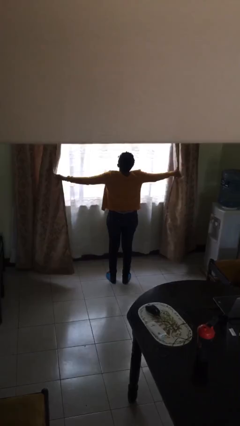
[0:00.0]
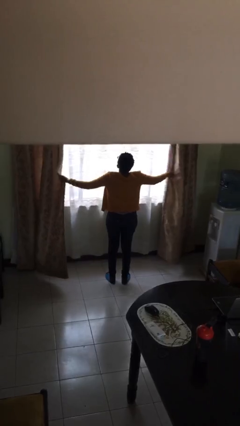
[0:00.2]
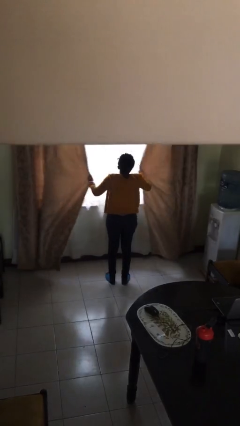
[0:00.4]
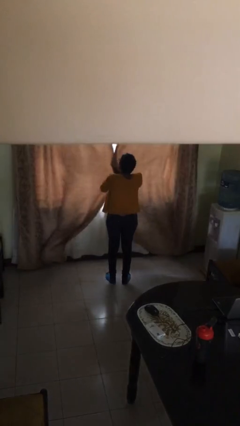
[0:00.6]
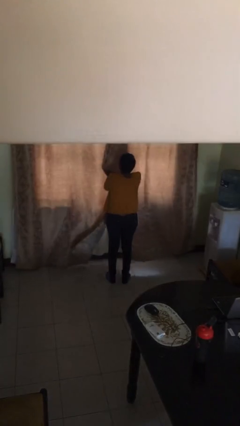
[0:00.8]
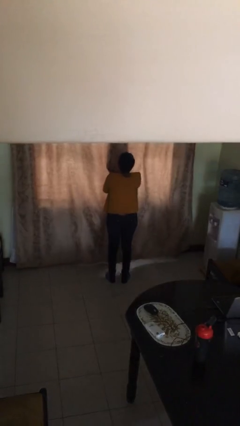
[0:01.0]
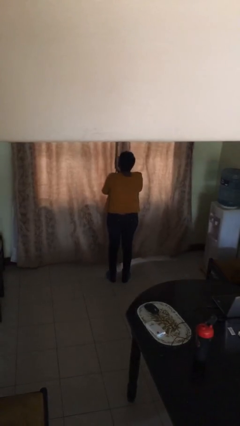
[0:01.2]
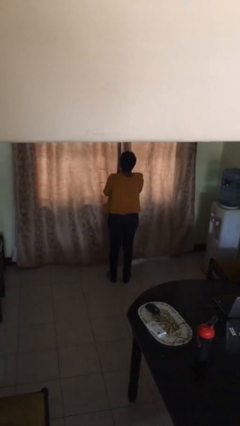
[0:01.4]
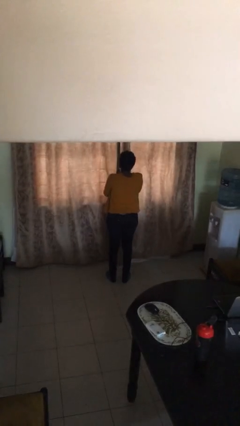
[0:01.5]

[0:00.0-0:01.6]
person closes curtains

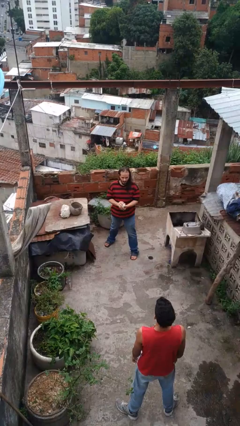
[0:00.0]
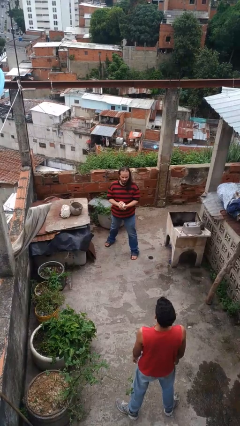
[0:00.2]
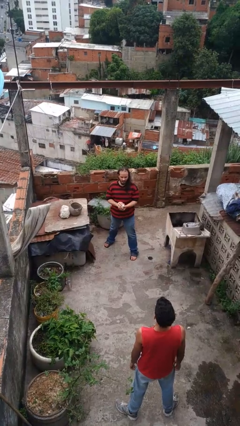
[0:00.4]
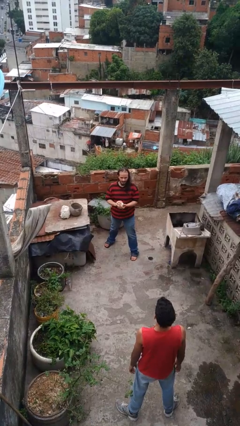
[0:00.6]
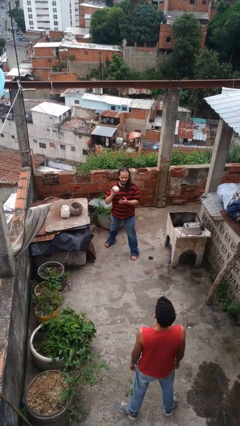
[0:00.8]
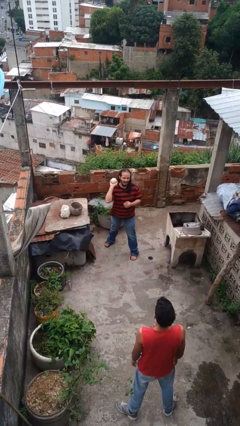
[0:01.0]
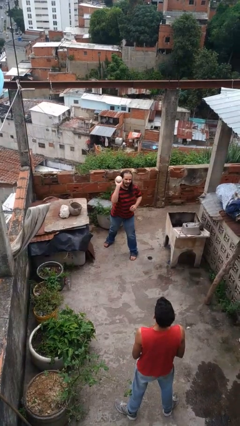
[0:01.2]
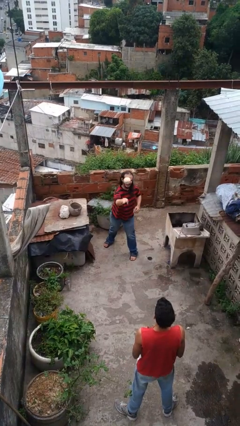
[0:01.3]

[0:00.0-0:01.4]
person throws object to person

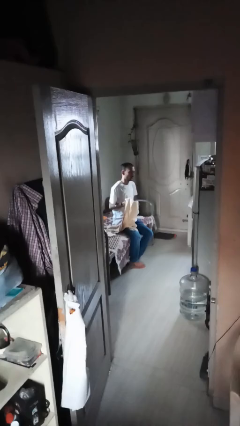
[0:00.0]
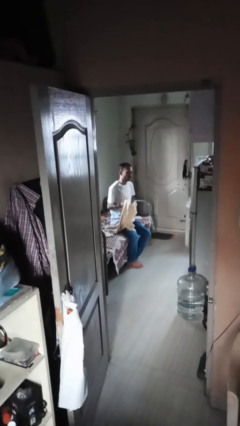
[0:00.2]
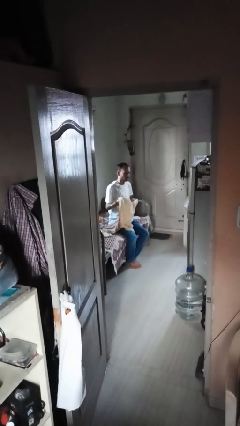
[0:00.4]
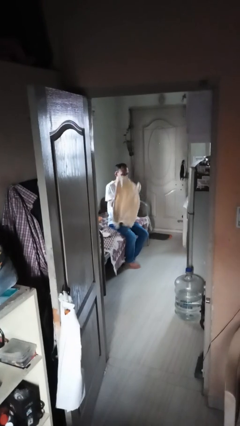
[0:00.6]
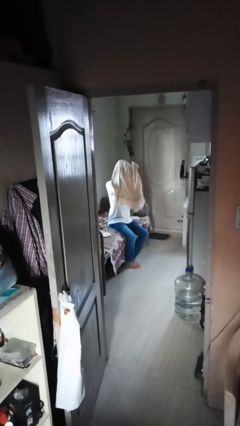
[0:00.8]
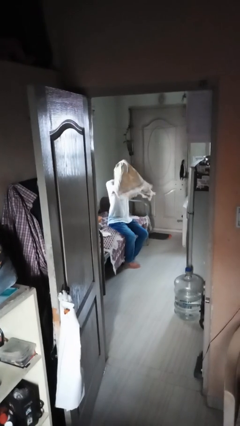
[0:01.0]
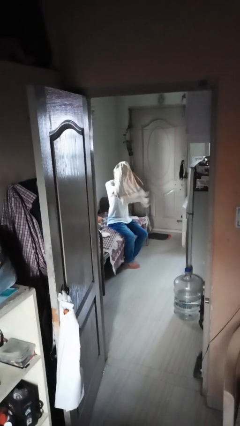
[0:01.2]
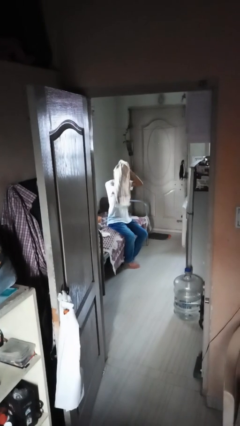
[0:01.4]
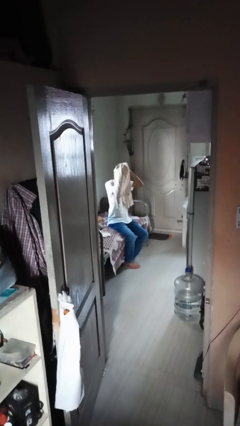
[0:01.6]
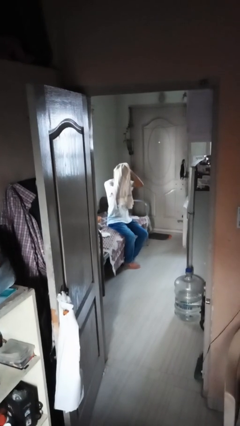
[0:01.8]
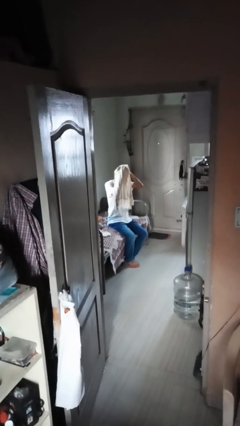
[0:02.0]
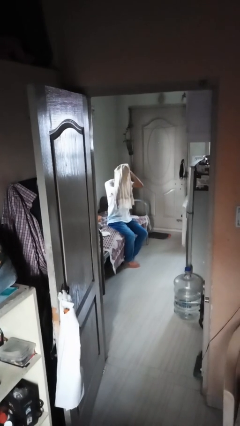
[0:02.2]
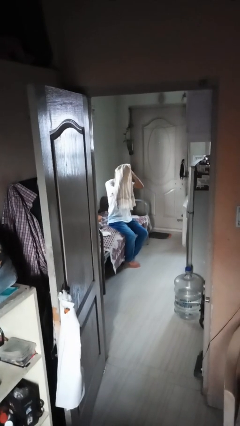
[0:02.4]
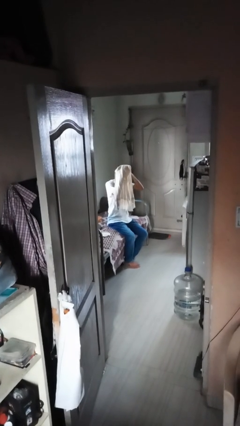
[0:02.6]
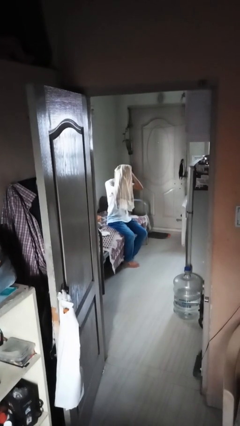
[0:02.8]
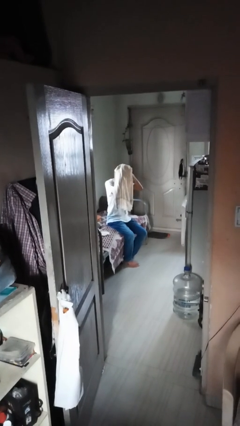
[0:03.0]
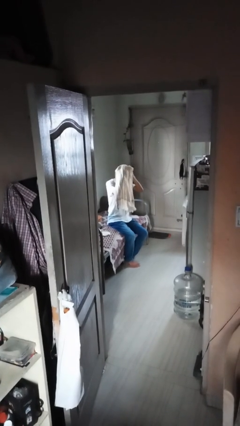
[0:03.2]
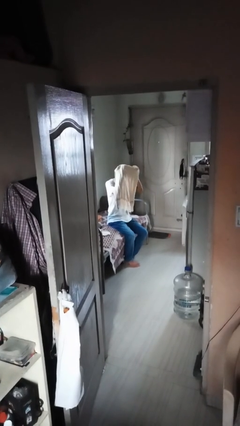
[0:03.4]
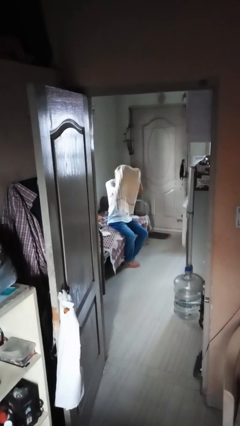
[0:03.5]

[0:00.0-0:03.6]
person dries hair with towel

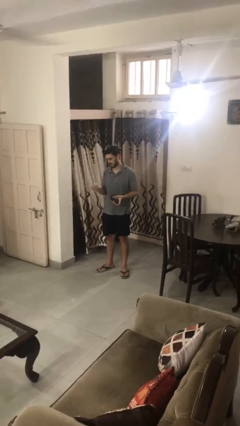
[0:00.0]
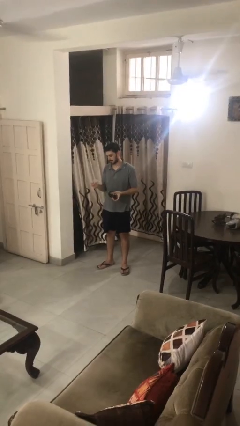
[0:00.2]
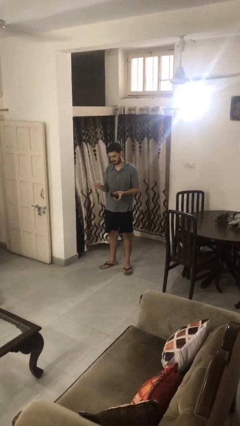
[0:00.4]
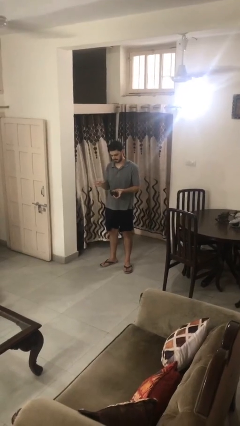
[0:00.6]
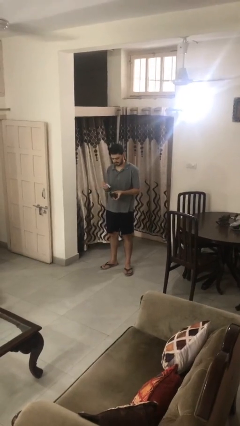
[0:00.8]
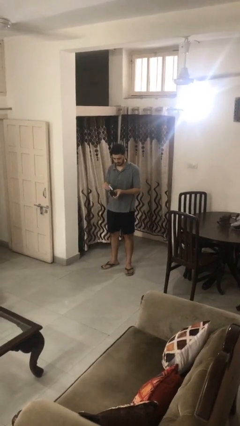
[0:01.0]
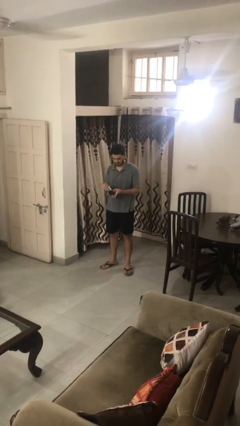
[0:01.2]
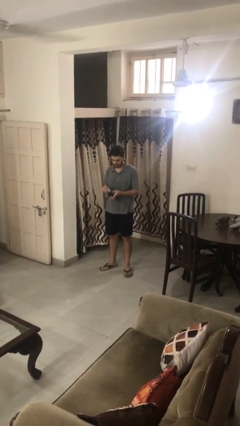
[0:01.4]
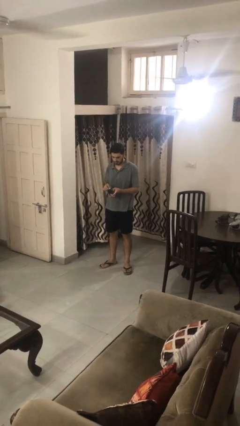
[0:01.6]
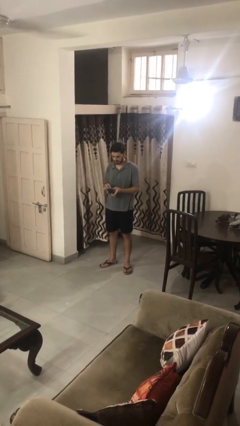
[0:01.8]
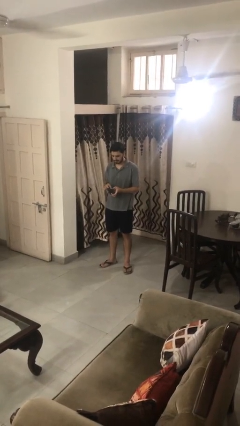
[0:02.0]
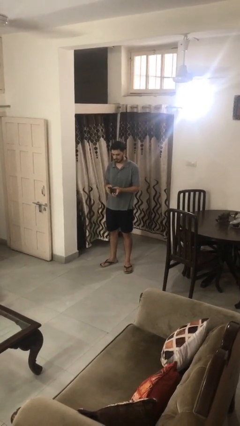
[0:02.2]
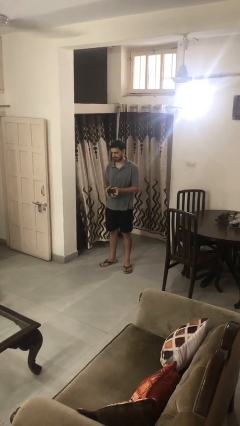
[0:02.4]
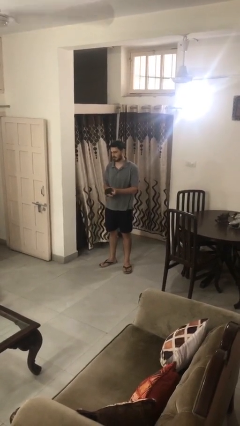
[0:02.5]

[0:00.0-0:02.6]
person puts object into purse

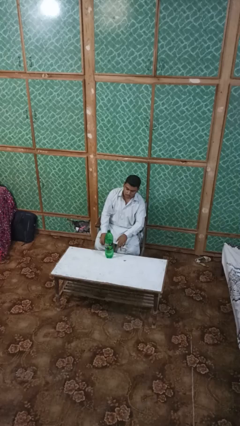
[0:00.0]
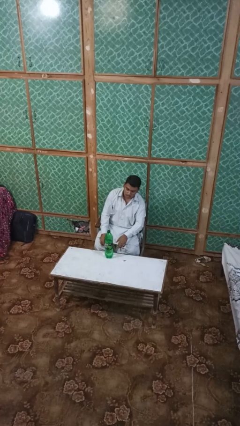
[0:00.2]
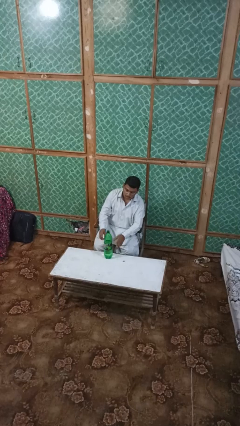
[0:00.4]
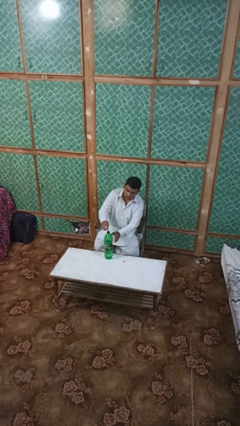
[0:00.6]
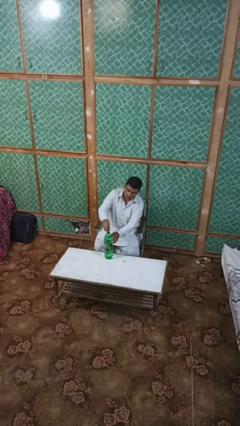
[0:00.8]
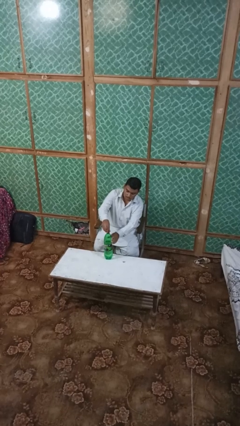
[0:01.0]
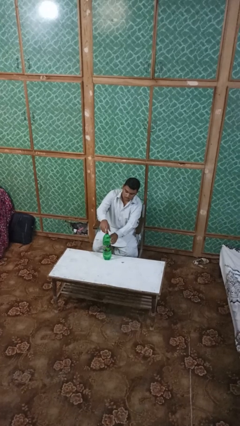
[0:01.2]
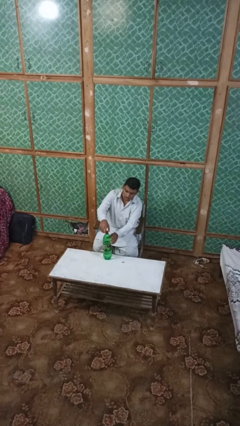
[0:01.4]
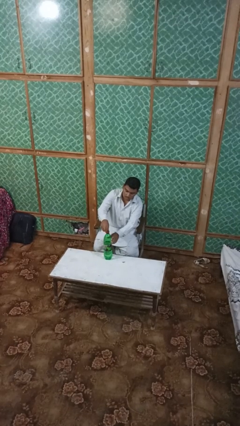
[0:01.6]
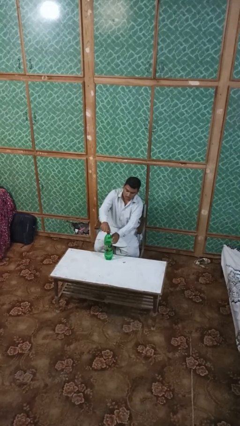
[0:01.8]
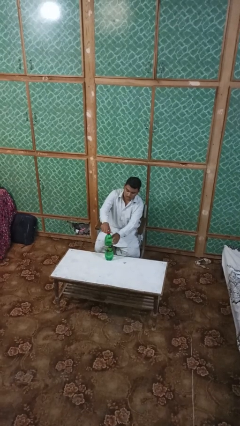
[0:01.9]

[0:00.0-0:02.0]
person screws lid to bottle

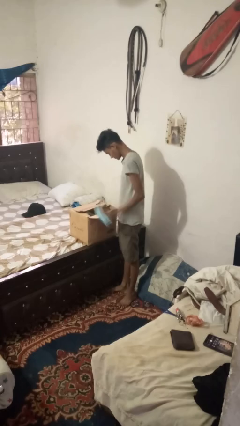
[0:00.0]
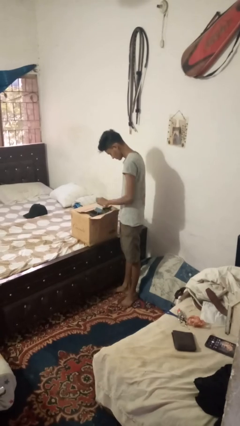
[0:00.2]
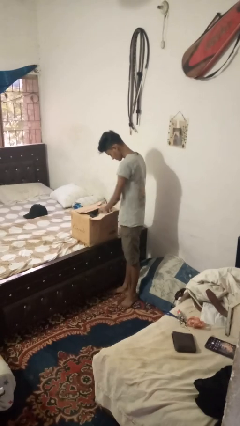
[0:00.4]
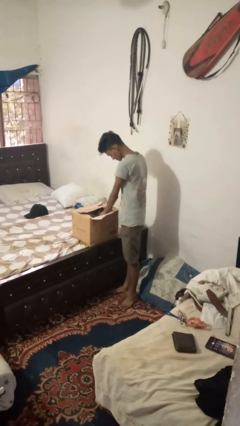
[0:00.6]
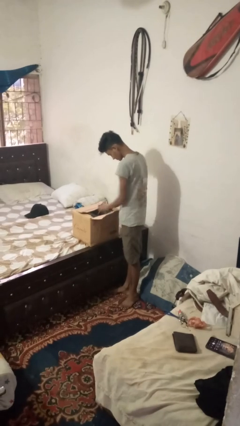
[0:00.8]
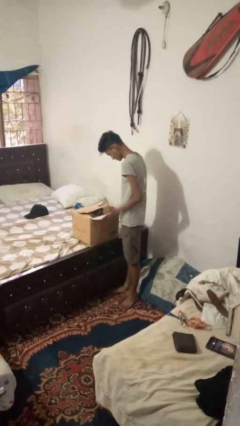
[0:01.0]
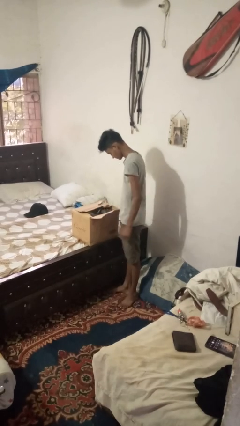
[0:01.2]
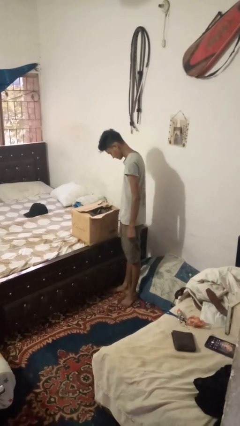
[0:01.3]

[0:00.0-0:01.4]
person puts object into box

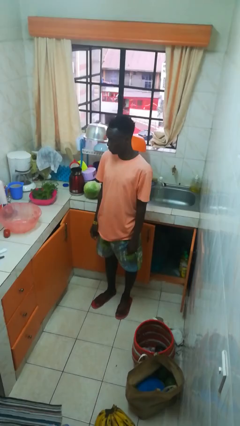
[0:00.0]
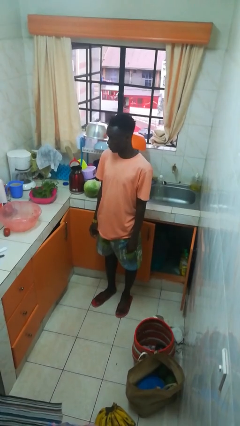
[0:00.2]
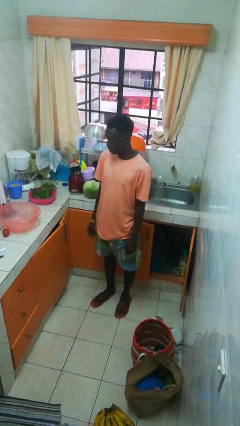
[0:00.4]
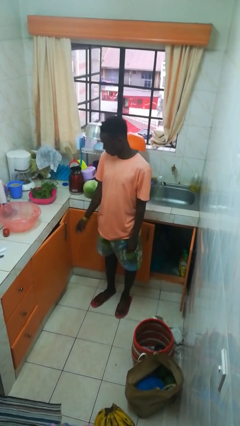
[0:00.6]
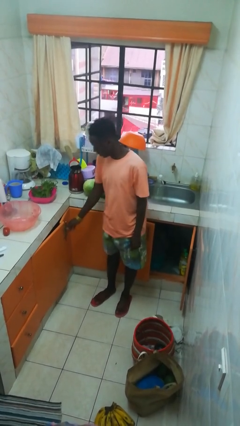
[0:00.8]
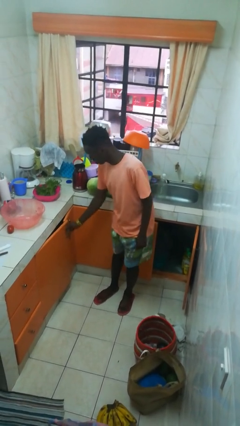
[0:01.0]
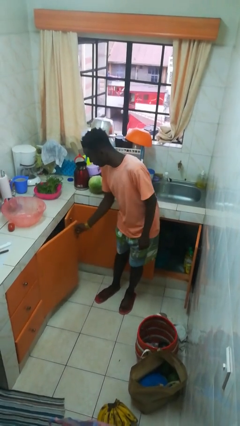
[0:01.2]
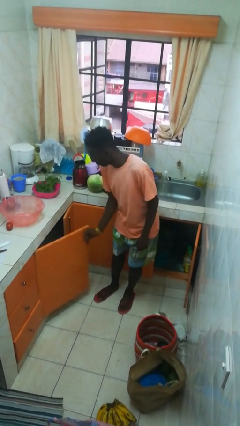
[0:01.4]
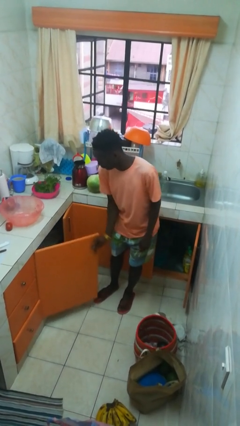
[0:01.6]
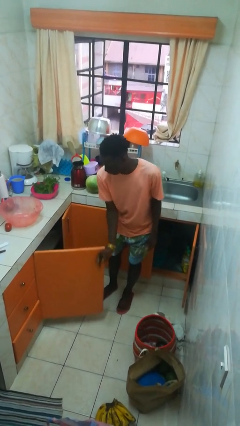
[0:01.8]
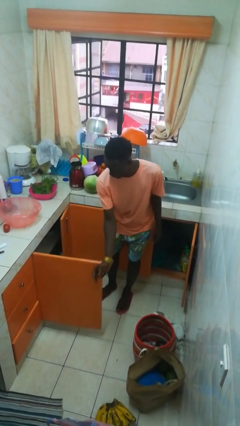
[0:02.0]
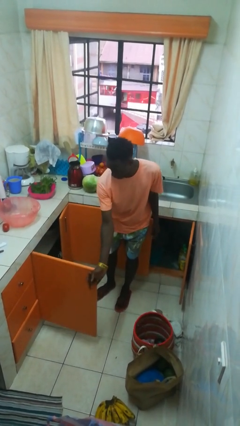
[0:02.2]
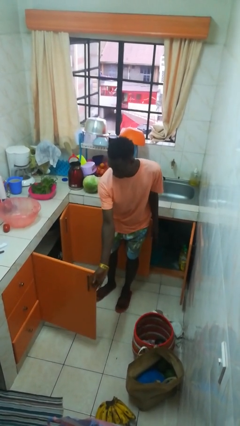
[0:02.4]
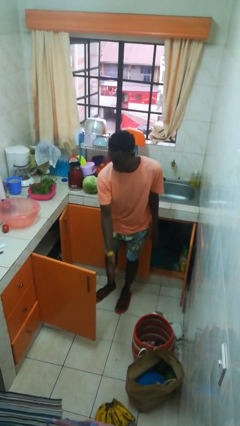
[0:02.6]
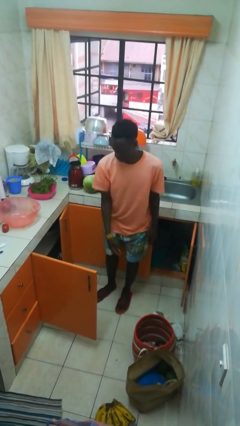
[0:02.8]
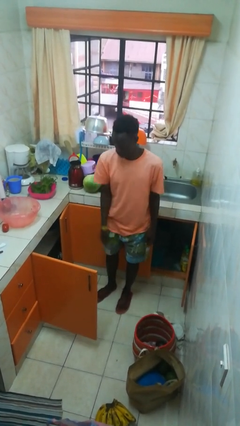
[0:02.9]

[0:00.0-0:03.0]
person opens cabinet

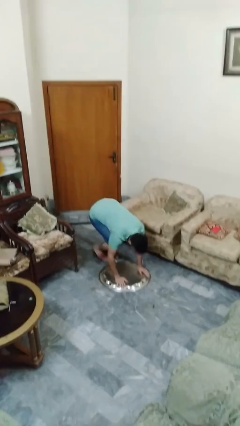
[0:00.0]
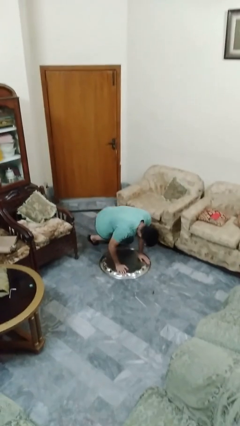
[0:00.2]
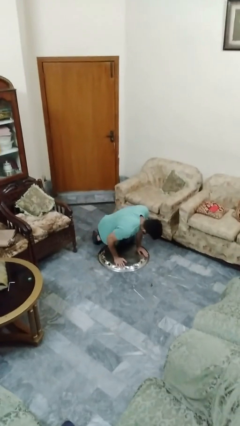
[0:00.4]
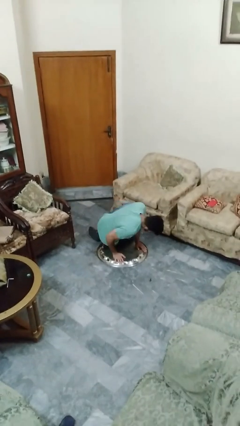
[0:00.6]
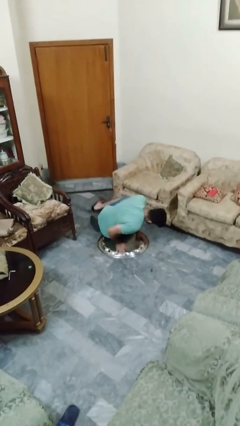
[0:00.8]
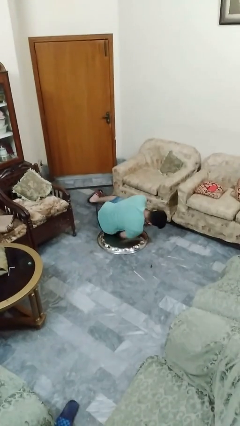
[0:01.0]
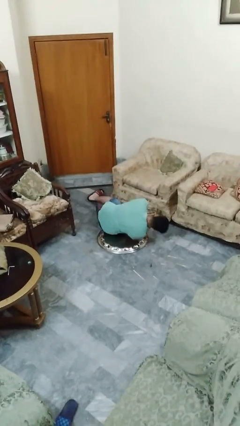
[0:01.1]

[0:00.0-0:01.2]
person trips on object on floor

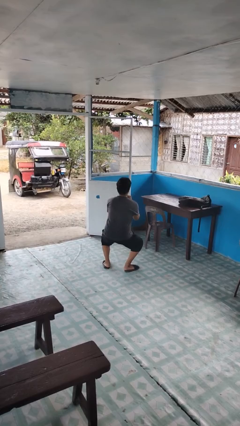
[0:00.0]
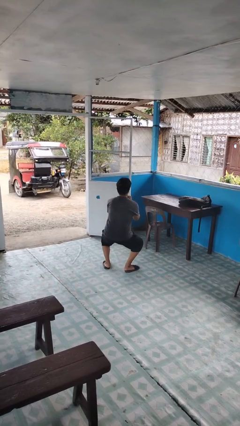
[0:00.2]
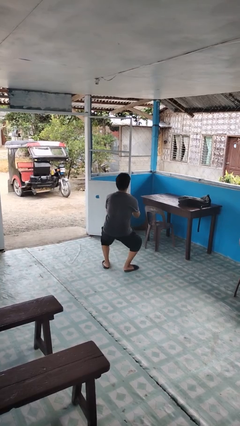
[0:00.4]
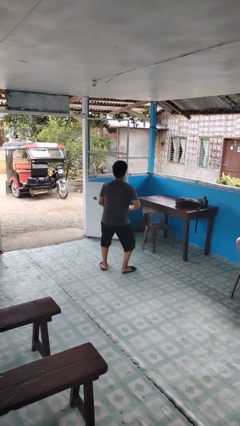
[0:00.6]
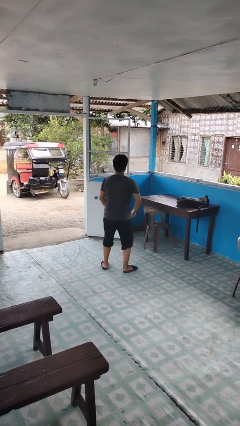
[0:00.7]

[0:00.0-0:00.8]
person stands up
